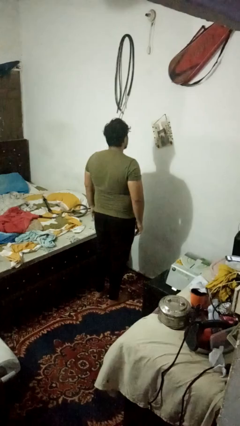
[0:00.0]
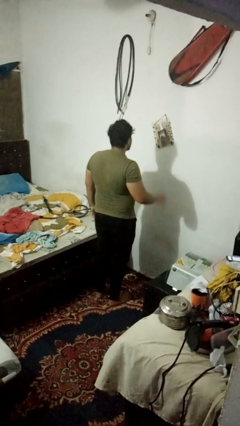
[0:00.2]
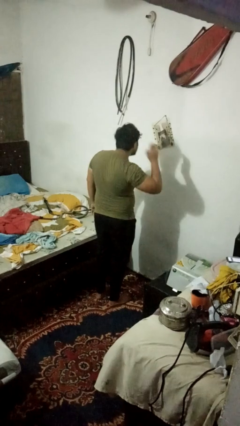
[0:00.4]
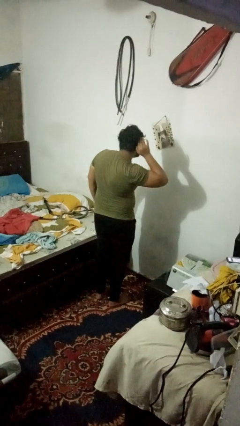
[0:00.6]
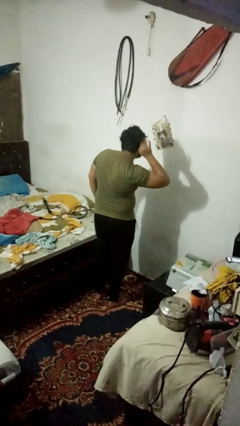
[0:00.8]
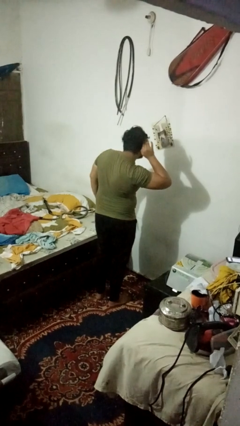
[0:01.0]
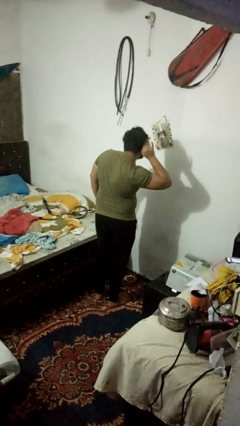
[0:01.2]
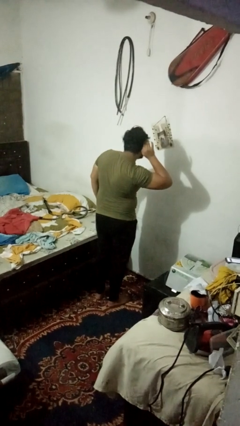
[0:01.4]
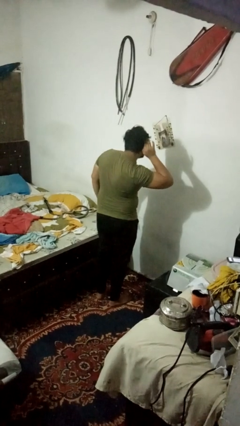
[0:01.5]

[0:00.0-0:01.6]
person gestures listen closely

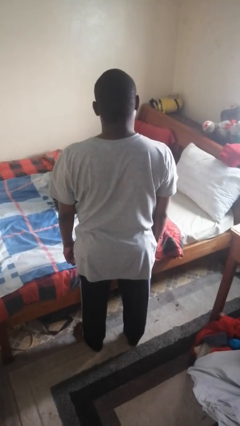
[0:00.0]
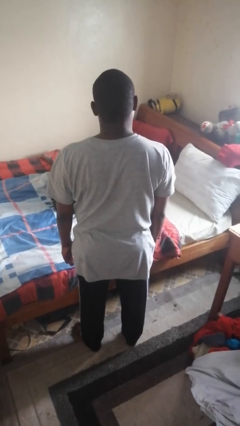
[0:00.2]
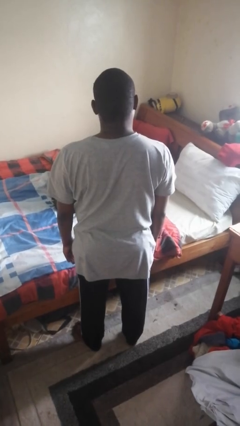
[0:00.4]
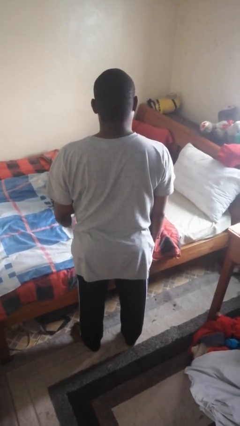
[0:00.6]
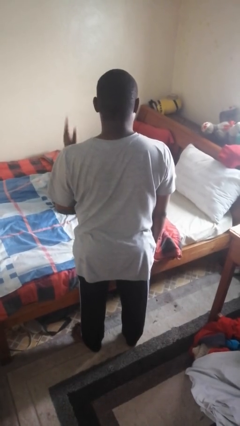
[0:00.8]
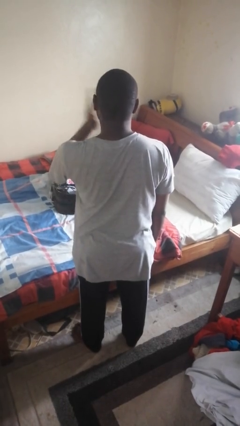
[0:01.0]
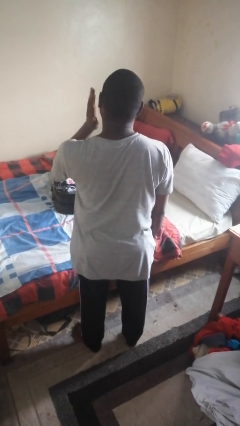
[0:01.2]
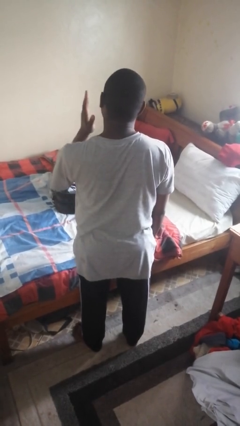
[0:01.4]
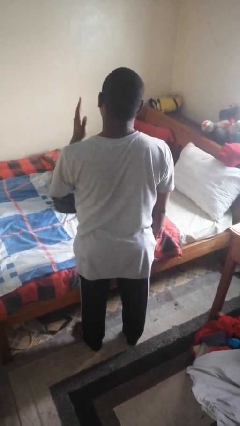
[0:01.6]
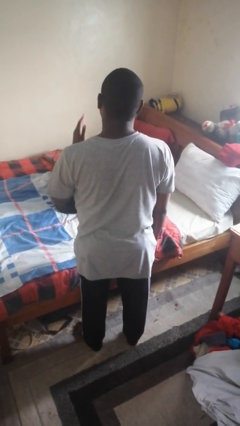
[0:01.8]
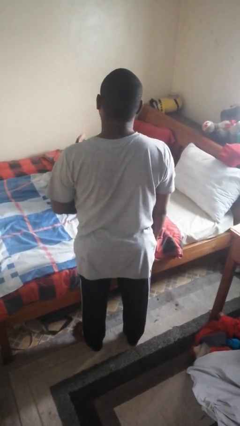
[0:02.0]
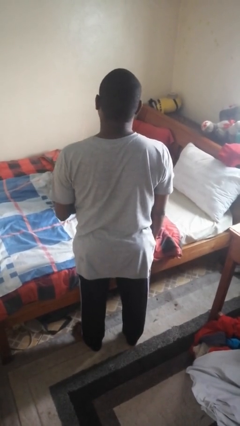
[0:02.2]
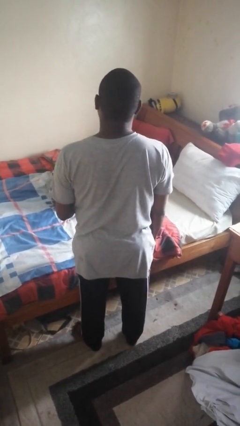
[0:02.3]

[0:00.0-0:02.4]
person swats bug

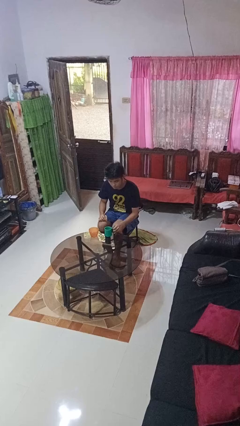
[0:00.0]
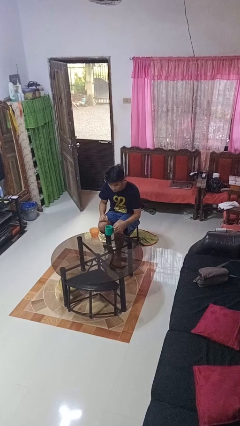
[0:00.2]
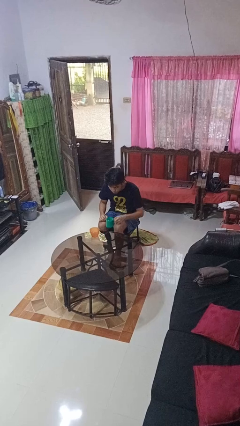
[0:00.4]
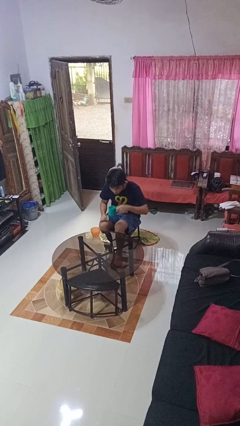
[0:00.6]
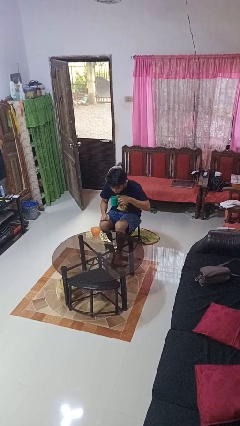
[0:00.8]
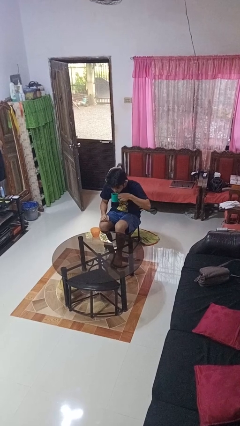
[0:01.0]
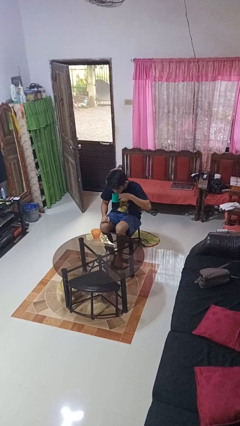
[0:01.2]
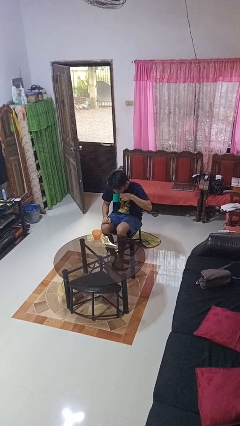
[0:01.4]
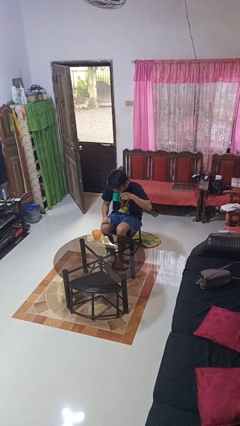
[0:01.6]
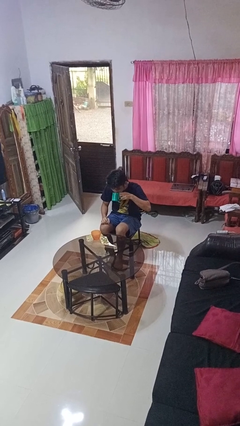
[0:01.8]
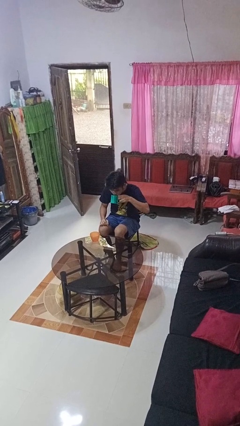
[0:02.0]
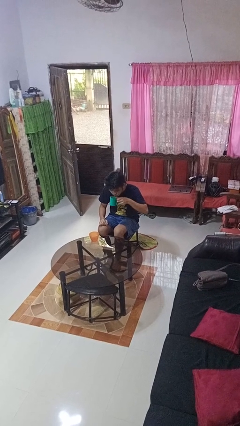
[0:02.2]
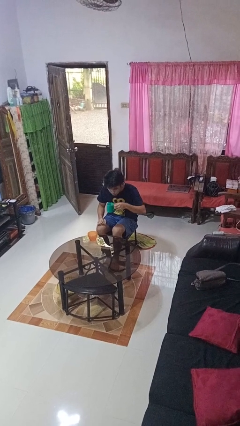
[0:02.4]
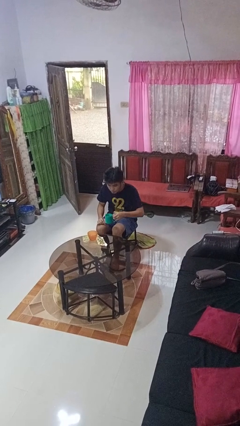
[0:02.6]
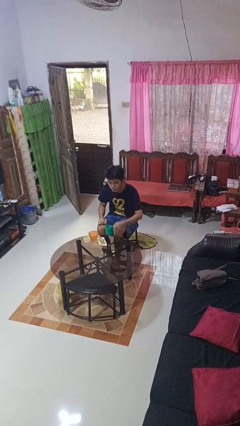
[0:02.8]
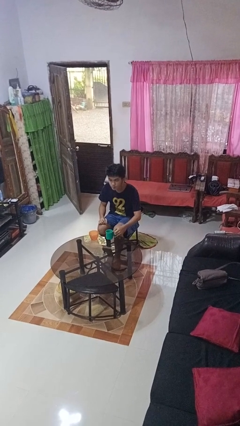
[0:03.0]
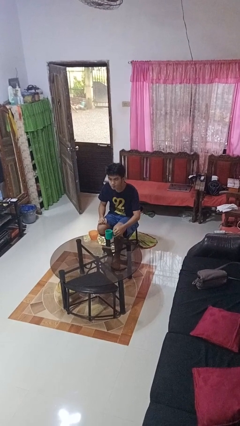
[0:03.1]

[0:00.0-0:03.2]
person drinks from cup

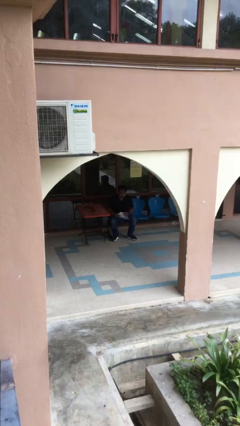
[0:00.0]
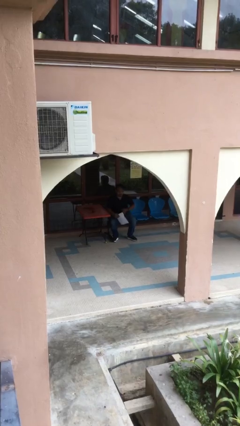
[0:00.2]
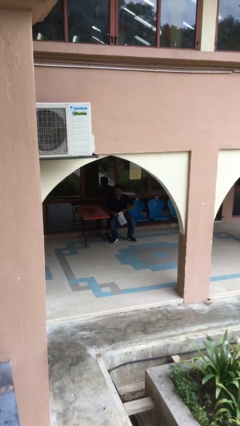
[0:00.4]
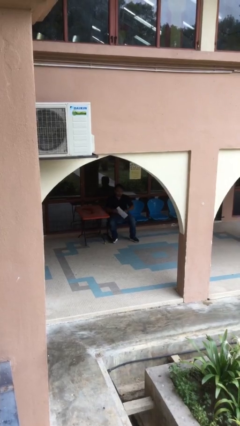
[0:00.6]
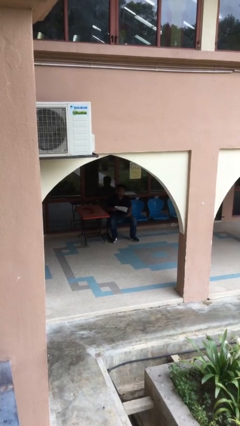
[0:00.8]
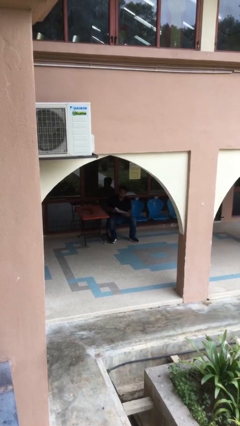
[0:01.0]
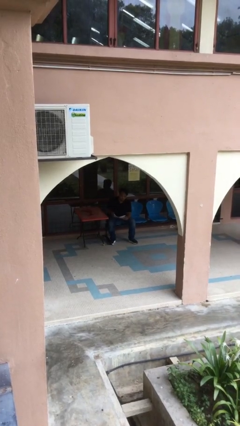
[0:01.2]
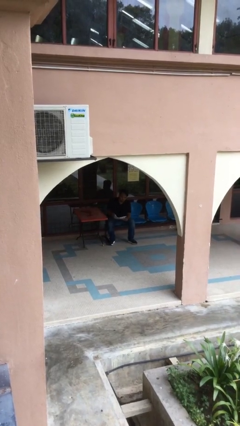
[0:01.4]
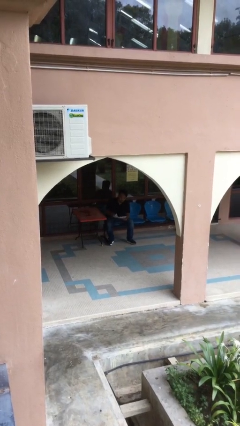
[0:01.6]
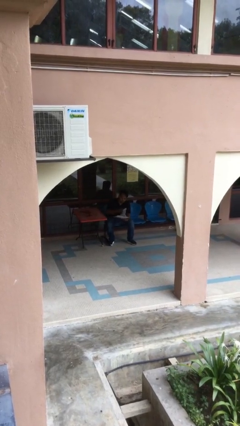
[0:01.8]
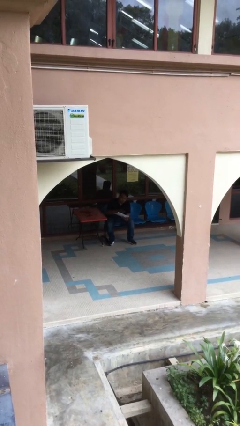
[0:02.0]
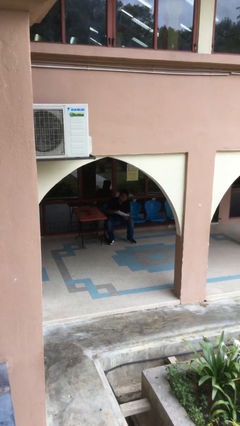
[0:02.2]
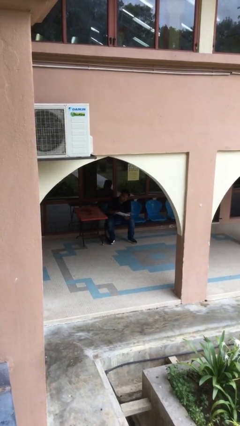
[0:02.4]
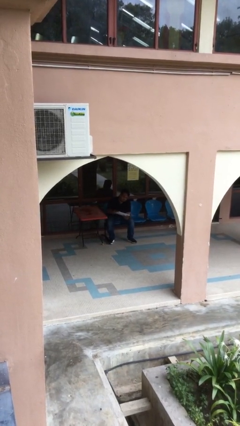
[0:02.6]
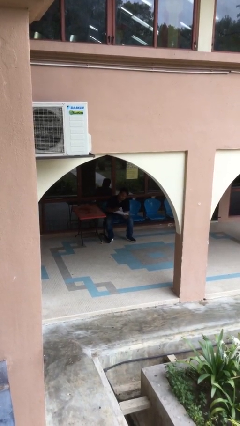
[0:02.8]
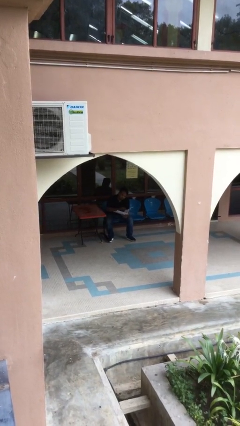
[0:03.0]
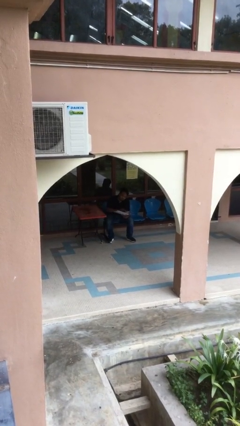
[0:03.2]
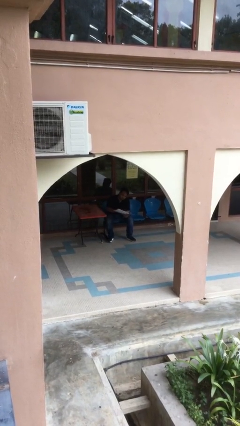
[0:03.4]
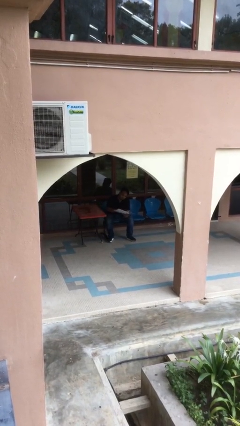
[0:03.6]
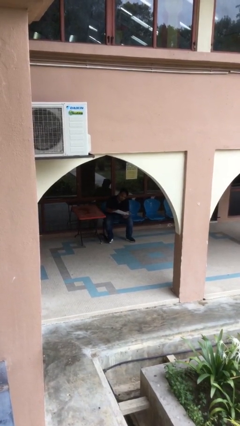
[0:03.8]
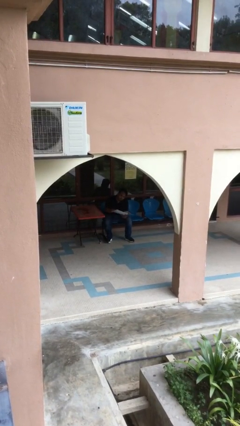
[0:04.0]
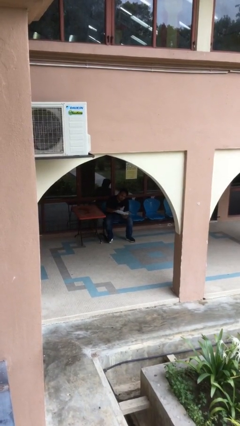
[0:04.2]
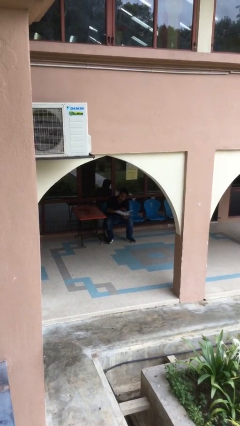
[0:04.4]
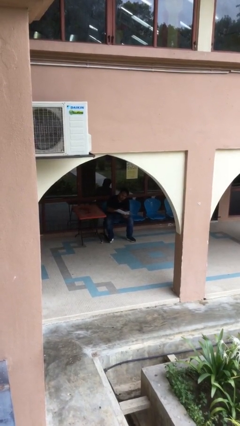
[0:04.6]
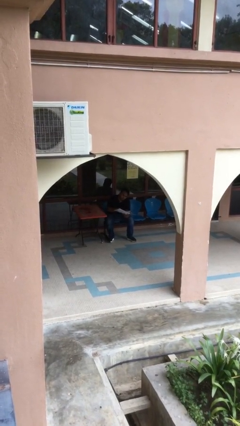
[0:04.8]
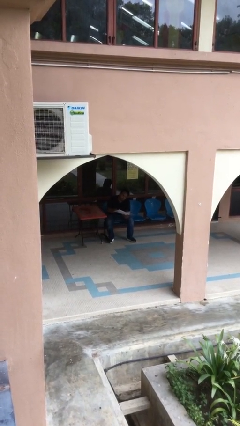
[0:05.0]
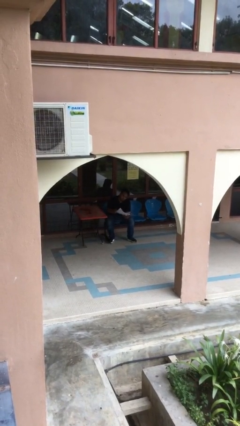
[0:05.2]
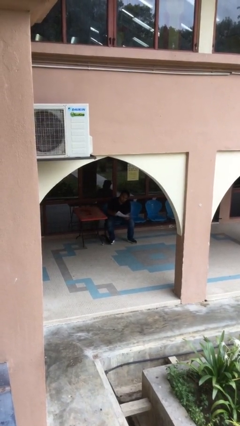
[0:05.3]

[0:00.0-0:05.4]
person reads document

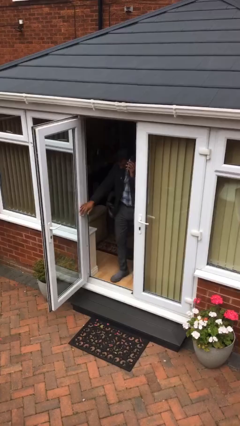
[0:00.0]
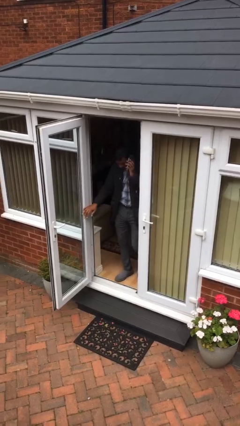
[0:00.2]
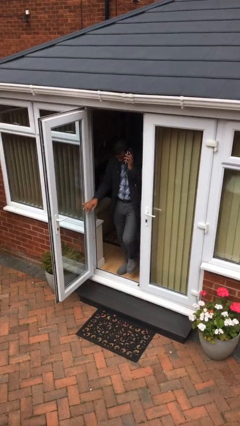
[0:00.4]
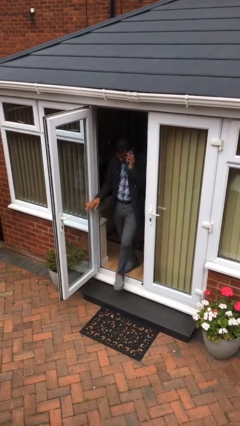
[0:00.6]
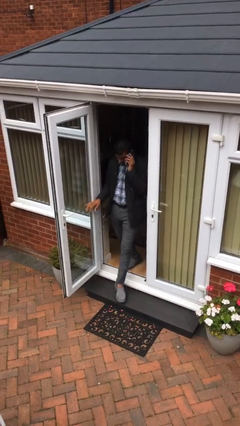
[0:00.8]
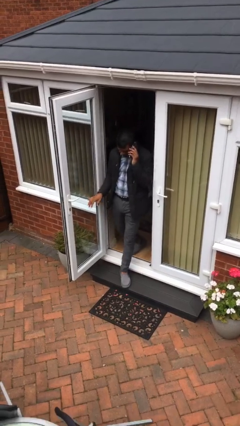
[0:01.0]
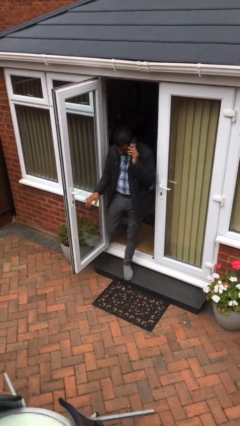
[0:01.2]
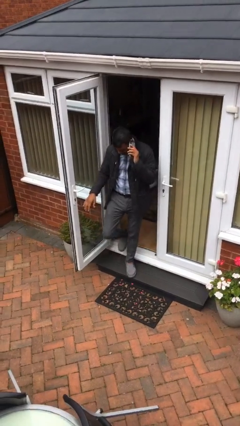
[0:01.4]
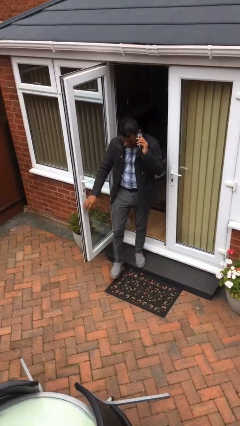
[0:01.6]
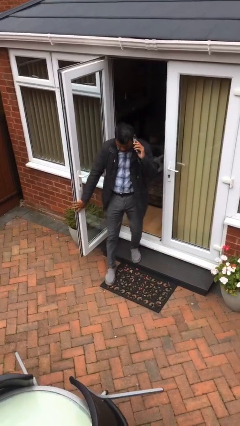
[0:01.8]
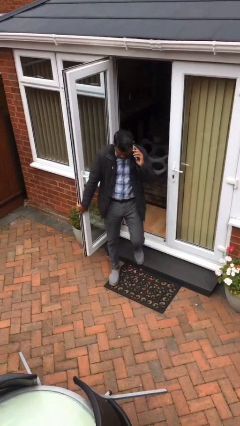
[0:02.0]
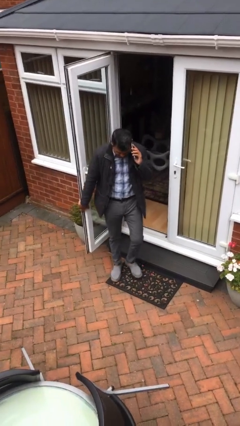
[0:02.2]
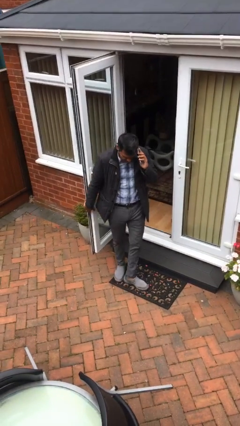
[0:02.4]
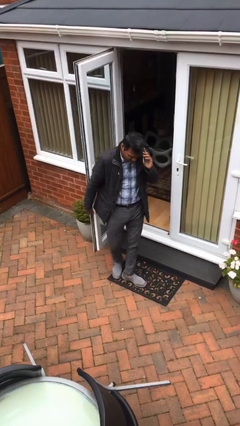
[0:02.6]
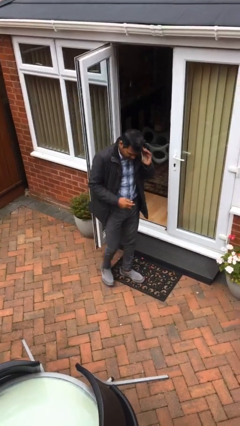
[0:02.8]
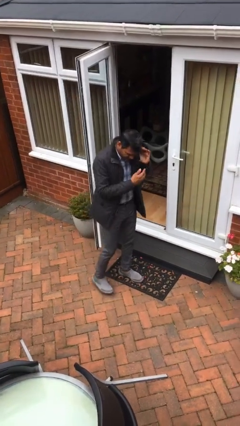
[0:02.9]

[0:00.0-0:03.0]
person enters scene through structure

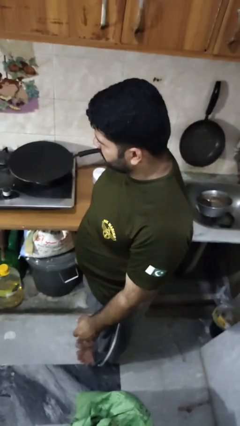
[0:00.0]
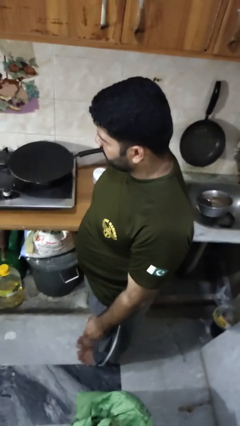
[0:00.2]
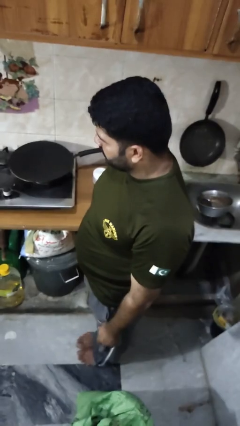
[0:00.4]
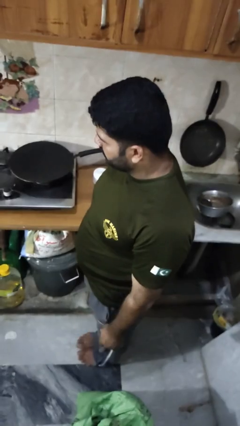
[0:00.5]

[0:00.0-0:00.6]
person burns hand

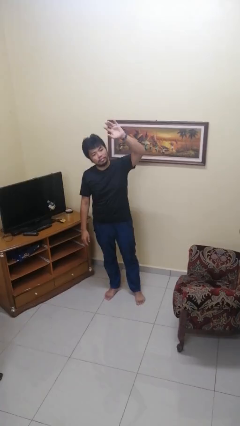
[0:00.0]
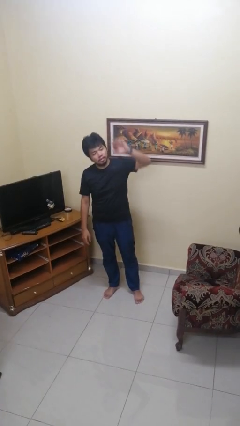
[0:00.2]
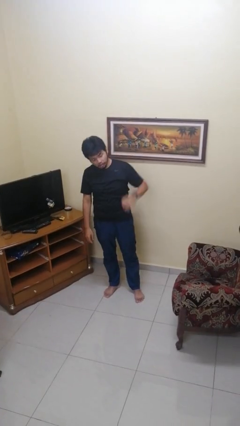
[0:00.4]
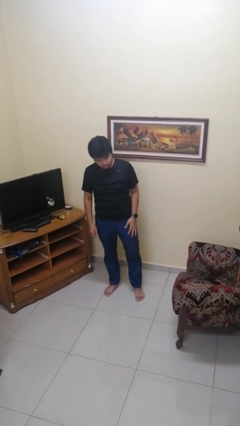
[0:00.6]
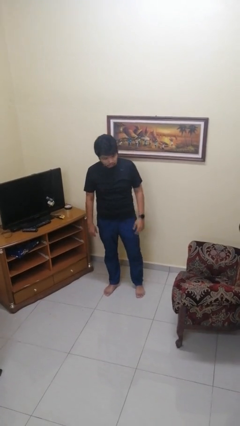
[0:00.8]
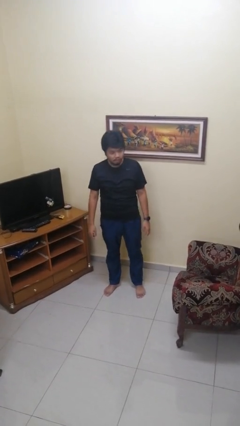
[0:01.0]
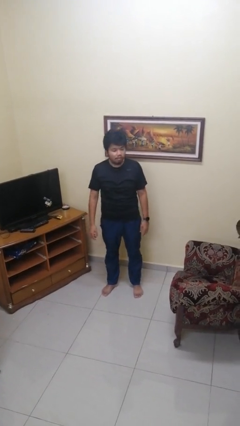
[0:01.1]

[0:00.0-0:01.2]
person gestures lower hand
